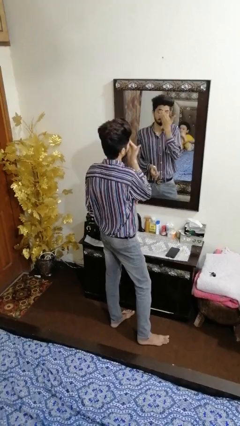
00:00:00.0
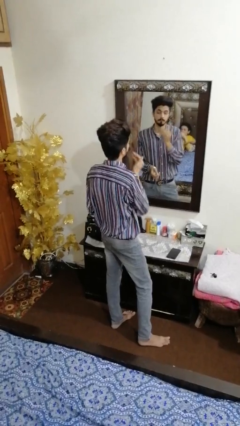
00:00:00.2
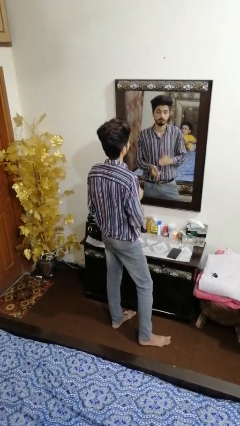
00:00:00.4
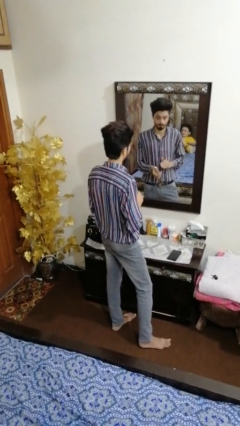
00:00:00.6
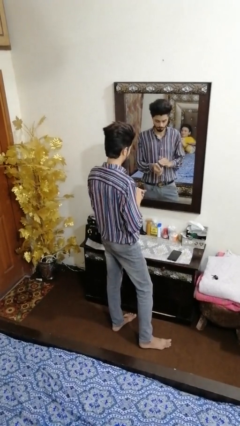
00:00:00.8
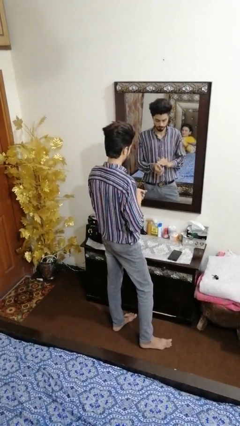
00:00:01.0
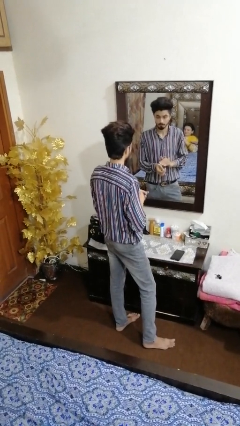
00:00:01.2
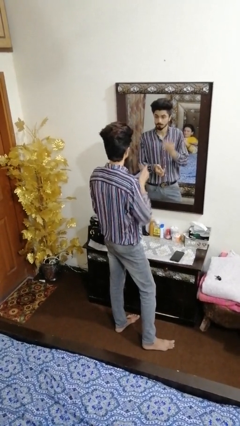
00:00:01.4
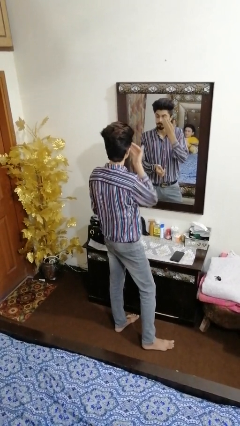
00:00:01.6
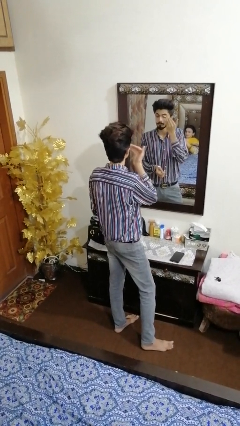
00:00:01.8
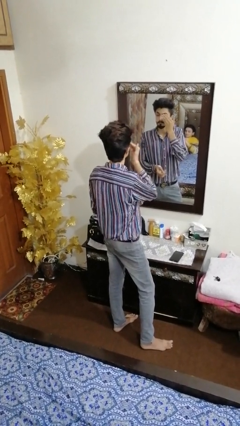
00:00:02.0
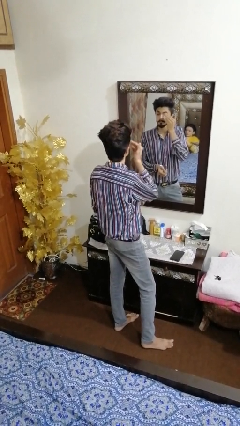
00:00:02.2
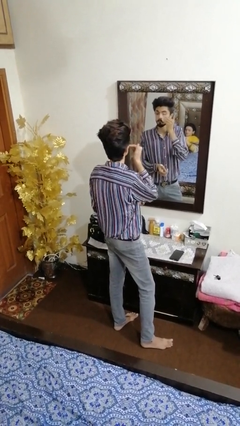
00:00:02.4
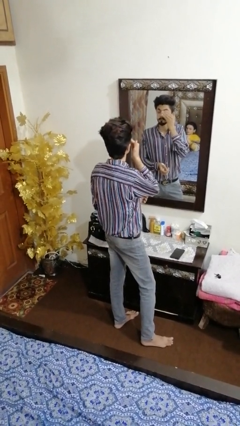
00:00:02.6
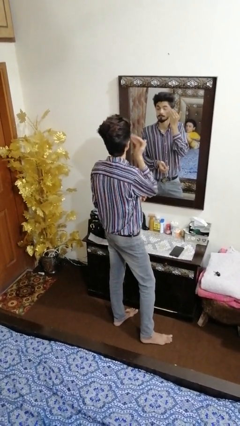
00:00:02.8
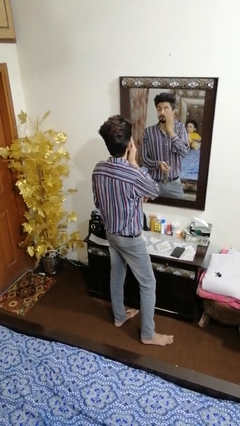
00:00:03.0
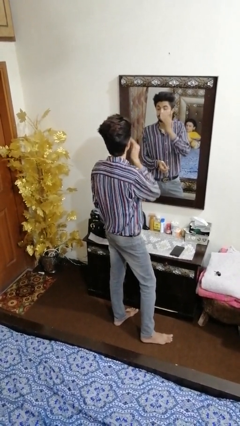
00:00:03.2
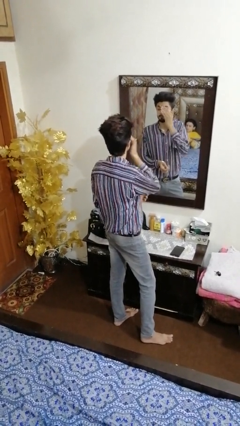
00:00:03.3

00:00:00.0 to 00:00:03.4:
person applies foundation makeup

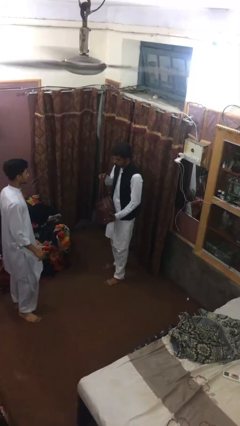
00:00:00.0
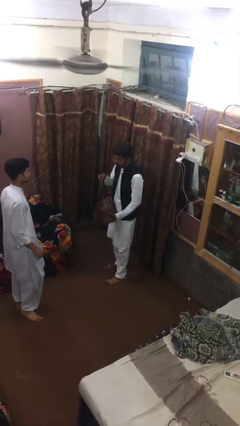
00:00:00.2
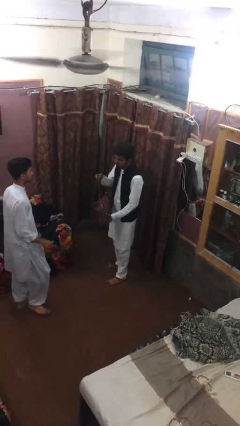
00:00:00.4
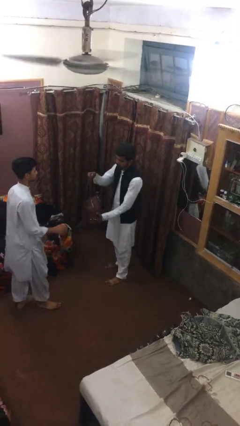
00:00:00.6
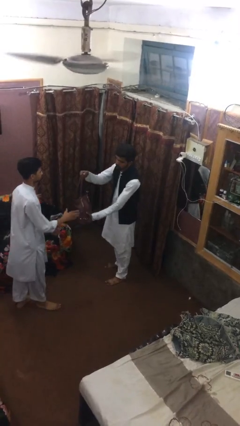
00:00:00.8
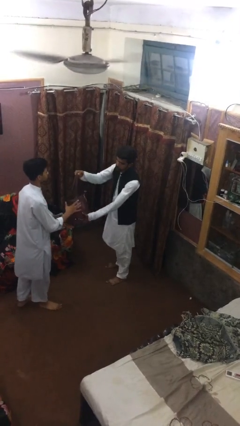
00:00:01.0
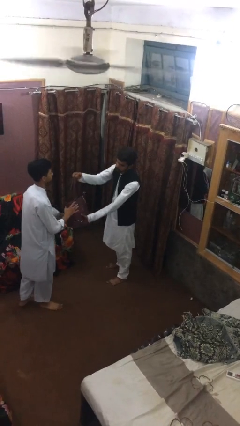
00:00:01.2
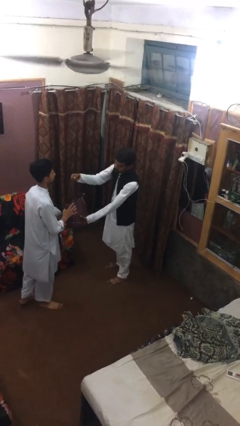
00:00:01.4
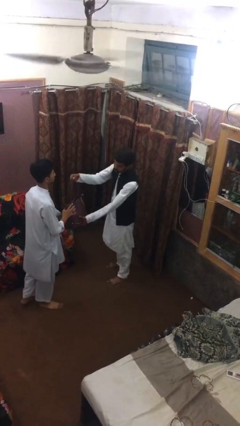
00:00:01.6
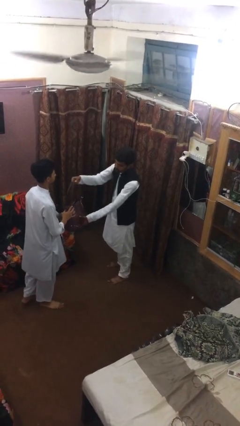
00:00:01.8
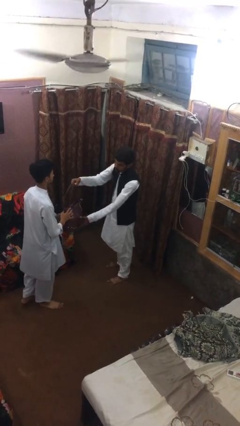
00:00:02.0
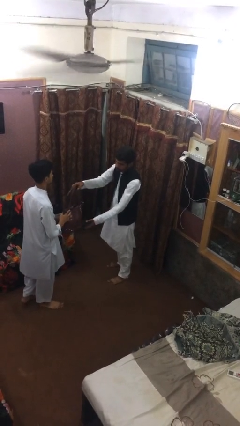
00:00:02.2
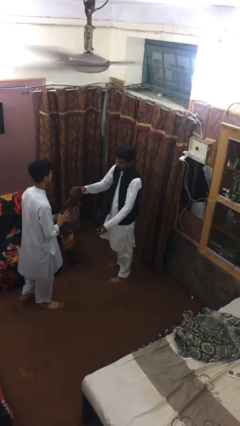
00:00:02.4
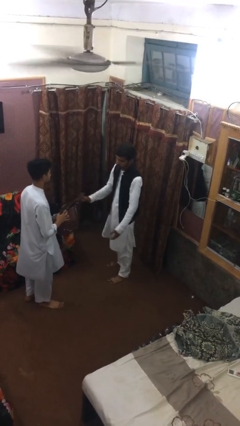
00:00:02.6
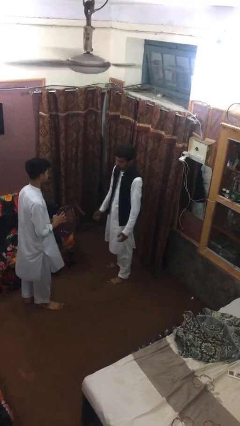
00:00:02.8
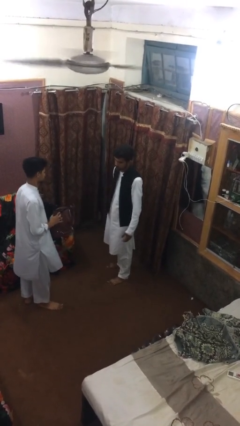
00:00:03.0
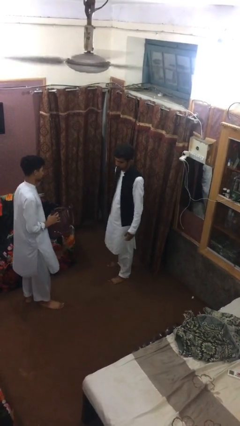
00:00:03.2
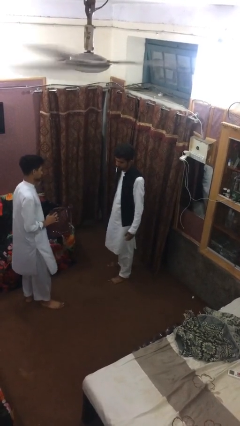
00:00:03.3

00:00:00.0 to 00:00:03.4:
person transfers object to person

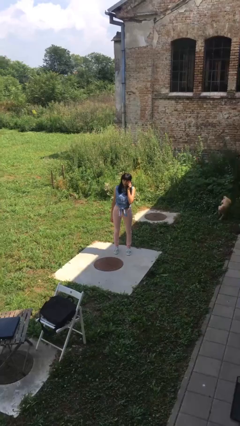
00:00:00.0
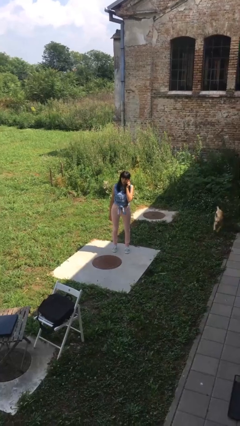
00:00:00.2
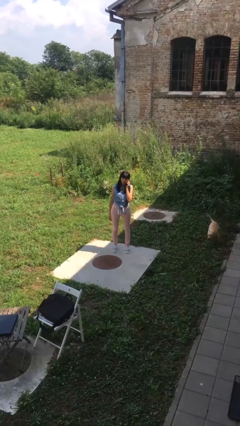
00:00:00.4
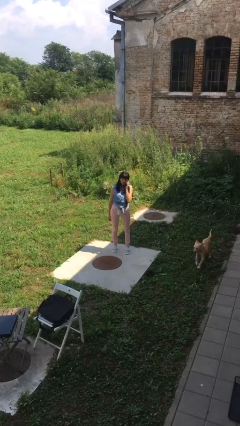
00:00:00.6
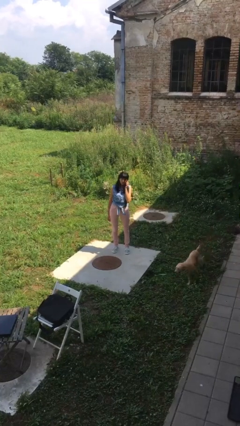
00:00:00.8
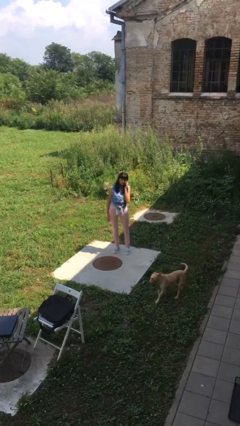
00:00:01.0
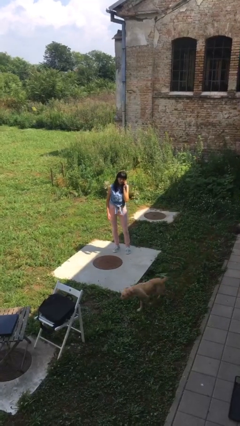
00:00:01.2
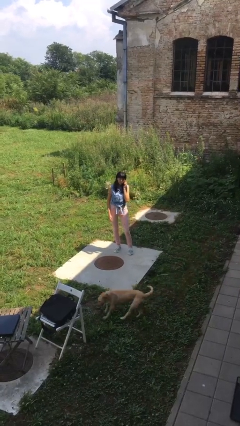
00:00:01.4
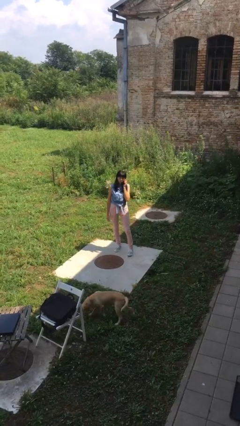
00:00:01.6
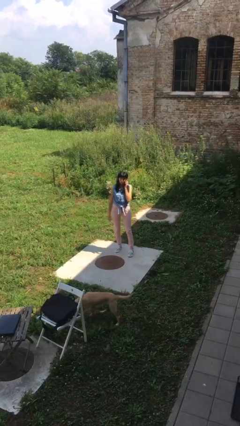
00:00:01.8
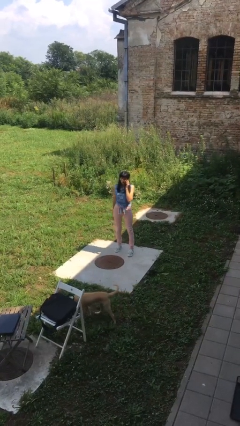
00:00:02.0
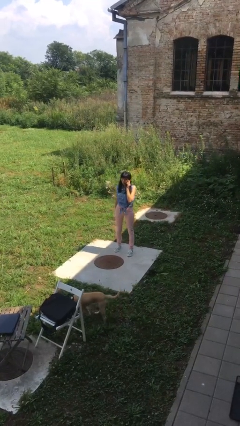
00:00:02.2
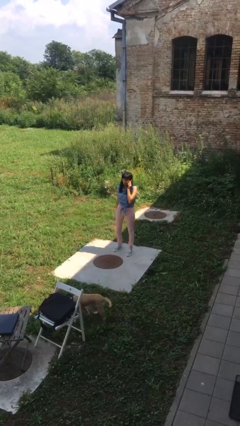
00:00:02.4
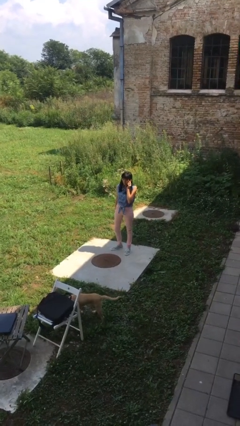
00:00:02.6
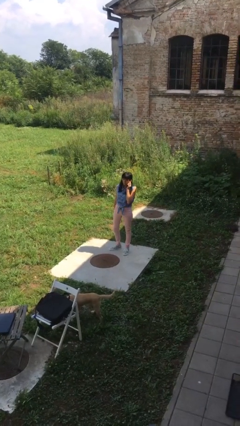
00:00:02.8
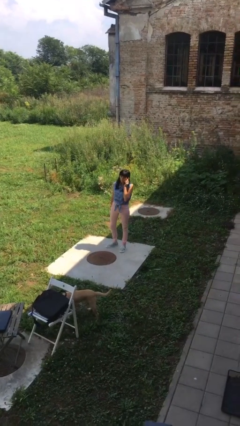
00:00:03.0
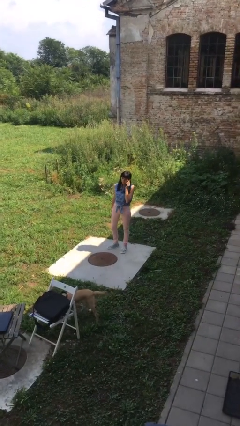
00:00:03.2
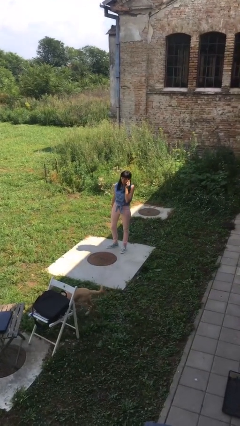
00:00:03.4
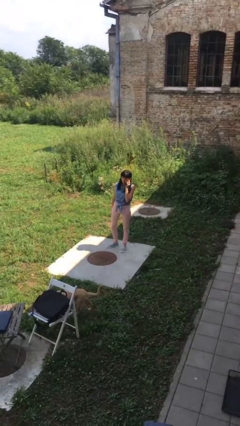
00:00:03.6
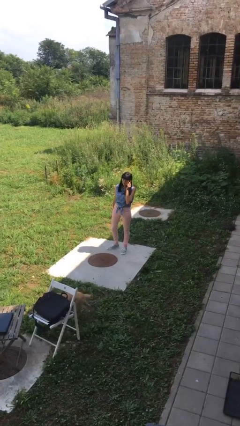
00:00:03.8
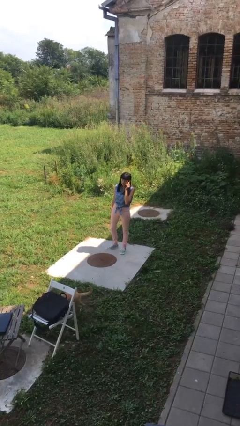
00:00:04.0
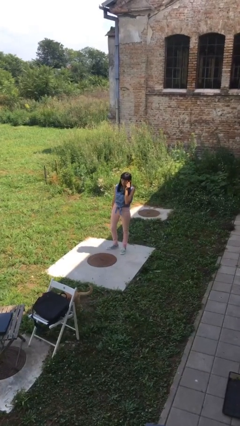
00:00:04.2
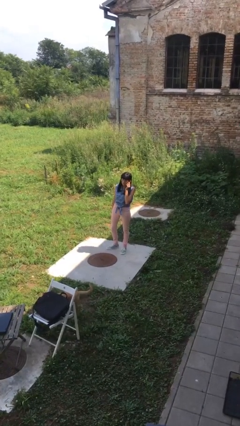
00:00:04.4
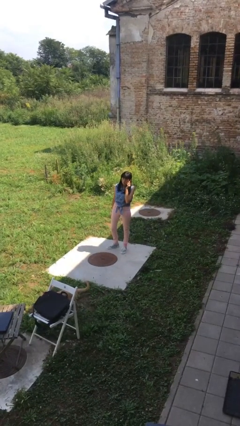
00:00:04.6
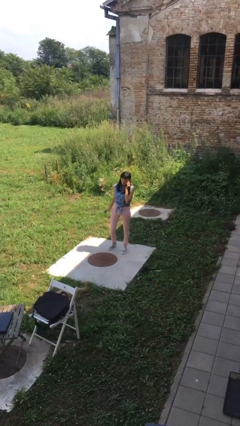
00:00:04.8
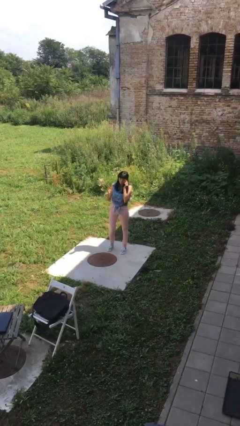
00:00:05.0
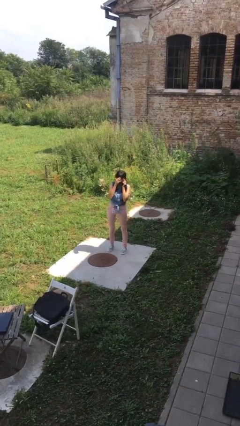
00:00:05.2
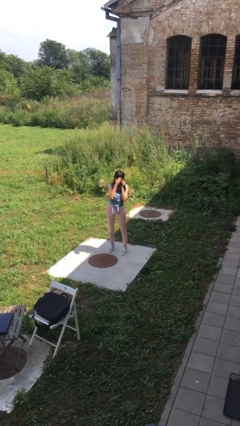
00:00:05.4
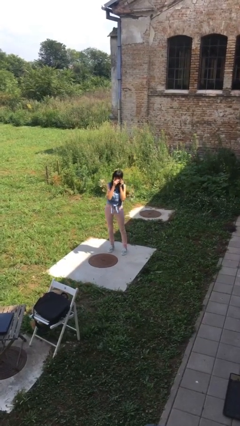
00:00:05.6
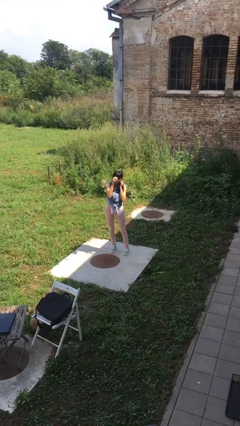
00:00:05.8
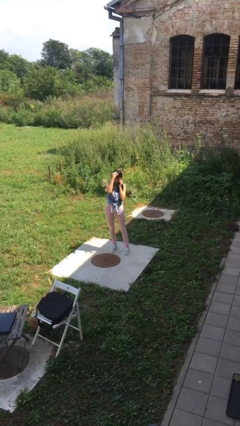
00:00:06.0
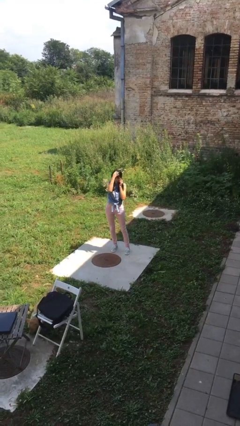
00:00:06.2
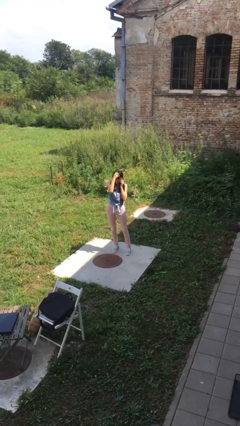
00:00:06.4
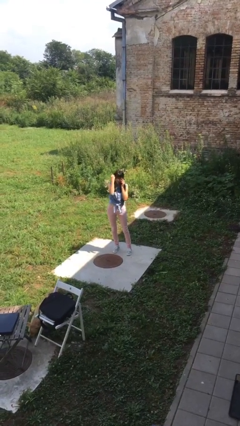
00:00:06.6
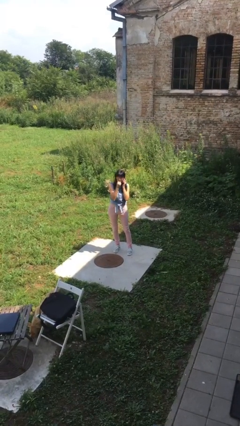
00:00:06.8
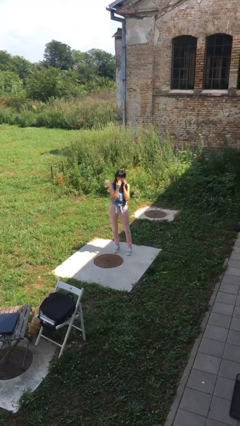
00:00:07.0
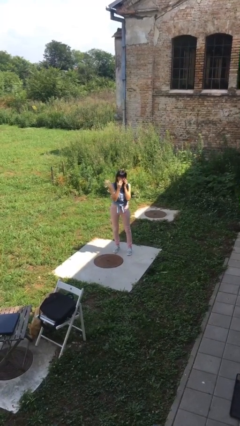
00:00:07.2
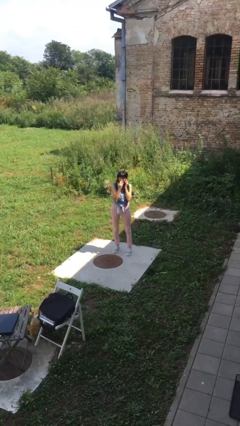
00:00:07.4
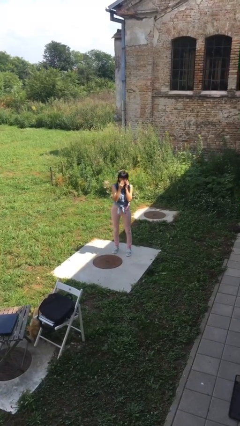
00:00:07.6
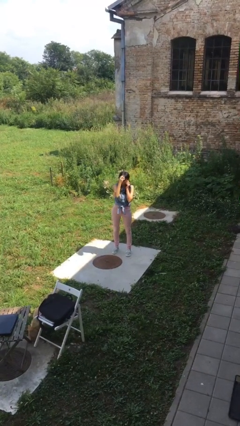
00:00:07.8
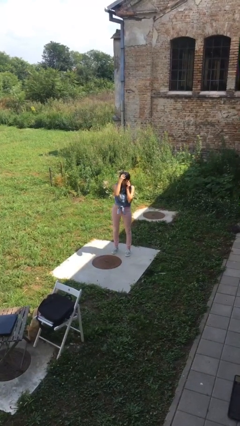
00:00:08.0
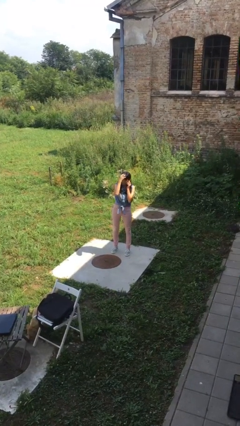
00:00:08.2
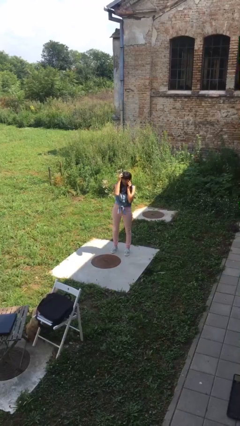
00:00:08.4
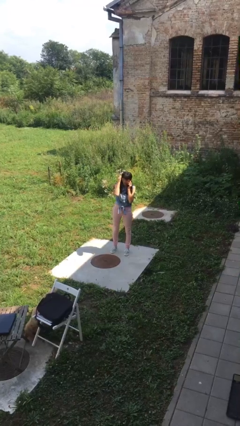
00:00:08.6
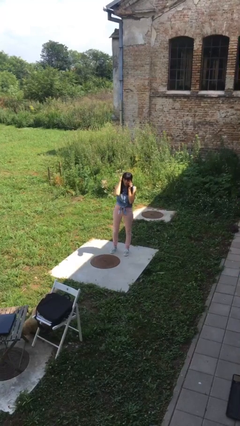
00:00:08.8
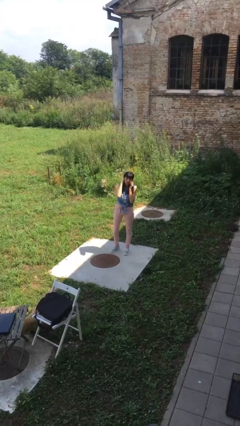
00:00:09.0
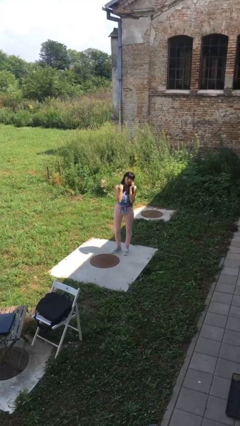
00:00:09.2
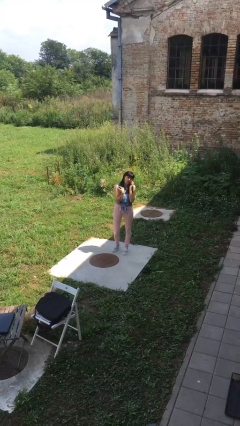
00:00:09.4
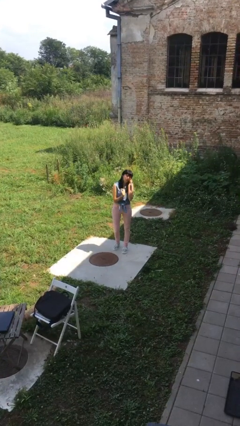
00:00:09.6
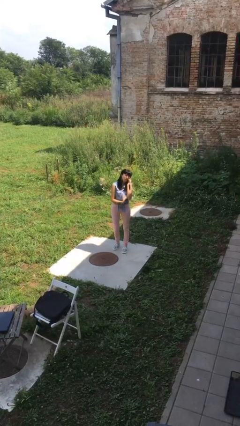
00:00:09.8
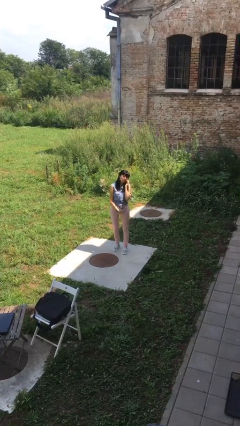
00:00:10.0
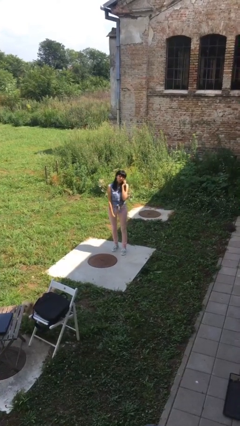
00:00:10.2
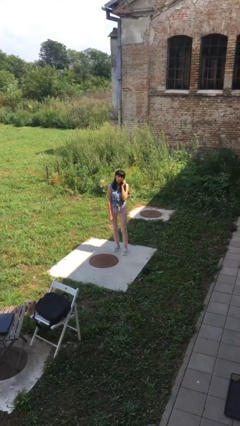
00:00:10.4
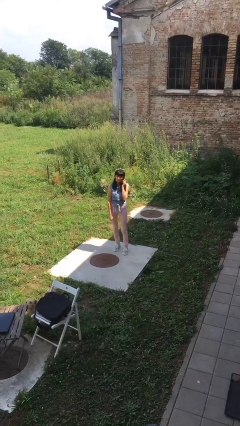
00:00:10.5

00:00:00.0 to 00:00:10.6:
person talks on phone

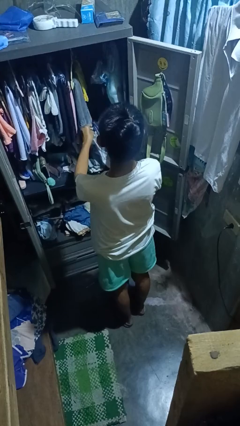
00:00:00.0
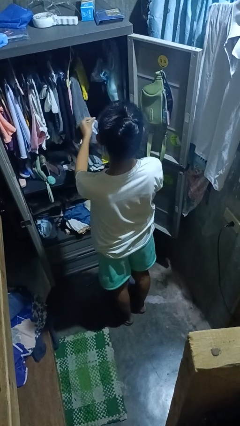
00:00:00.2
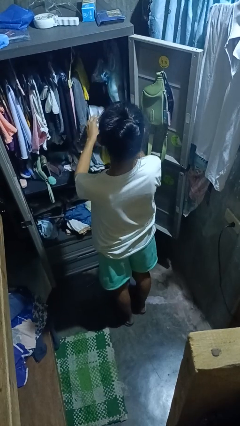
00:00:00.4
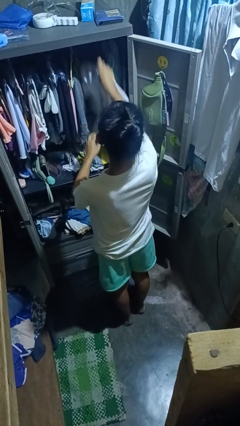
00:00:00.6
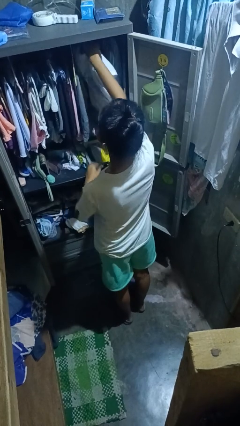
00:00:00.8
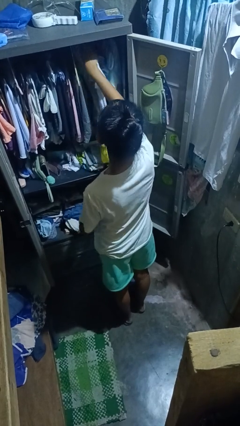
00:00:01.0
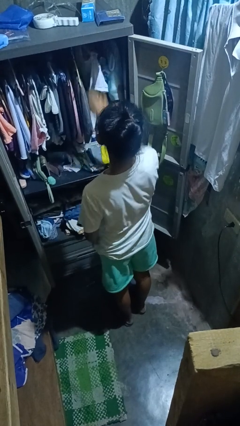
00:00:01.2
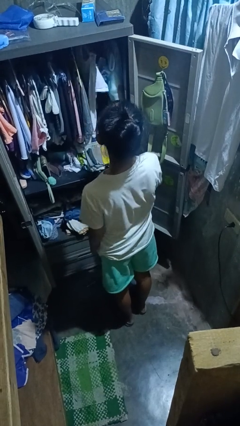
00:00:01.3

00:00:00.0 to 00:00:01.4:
person puts clothes into closet
